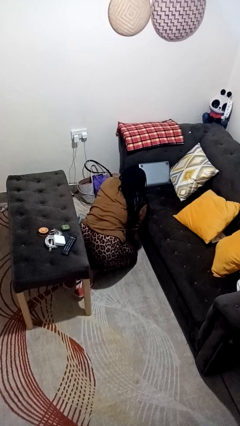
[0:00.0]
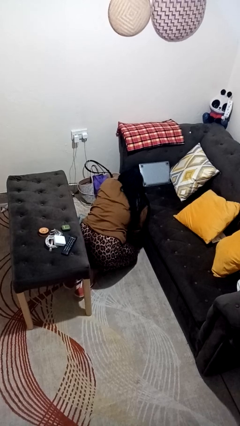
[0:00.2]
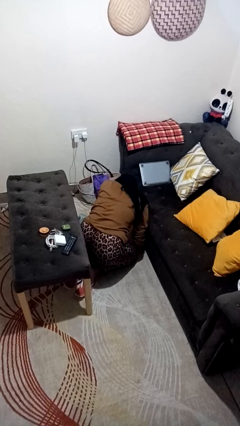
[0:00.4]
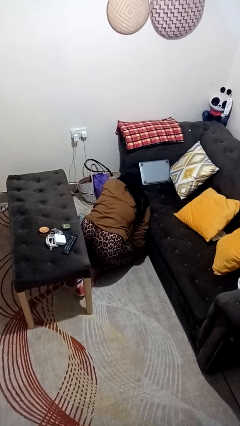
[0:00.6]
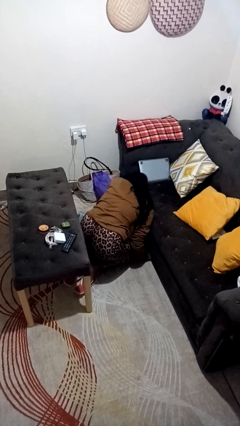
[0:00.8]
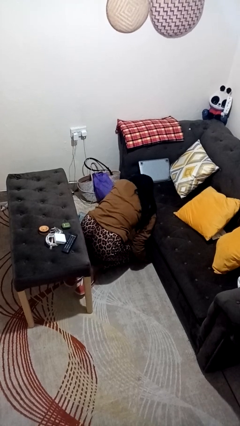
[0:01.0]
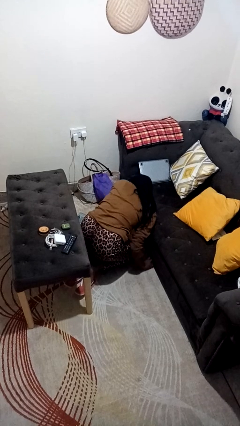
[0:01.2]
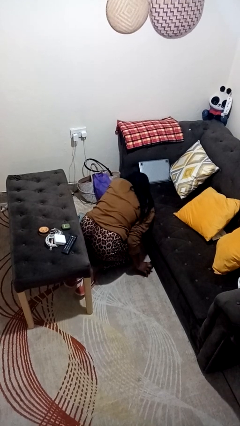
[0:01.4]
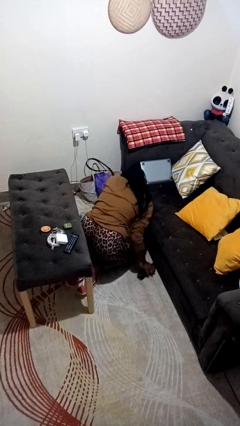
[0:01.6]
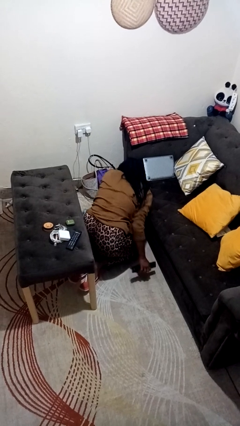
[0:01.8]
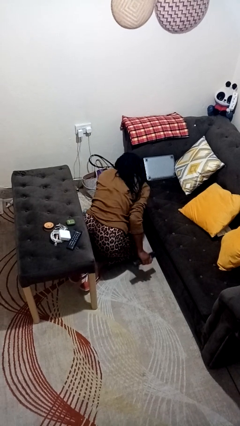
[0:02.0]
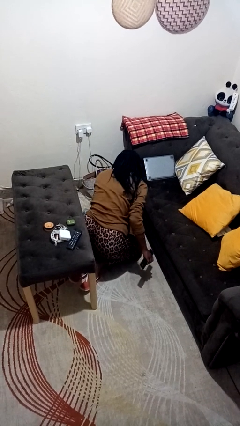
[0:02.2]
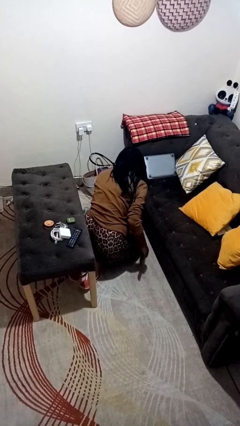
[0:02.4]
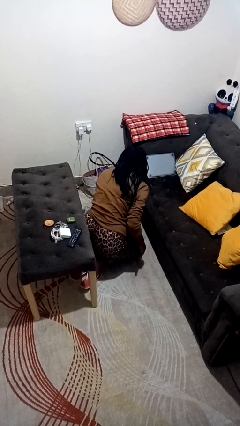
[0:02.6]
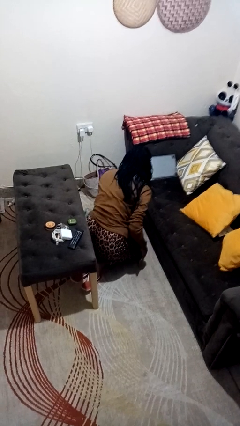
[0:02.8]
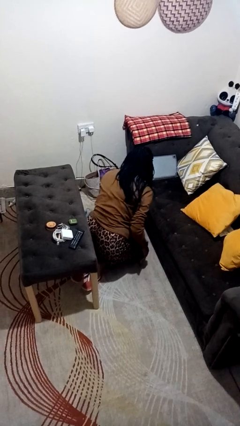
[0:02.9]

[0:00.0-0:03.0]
person searches under couch

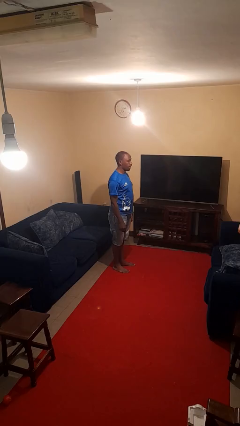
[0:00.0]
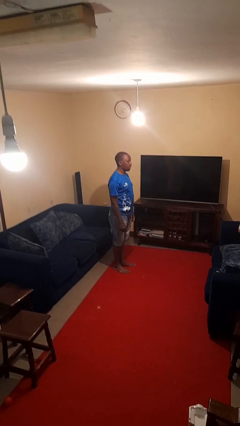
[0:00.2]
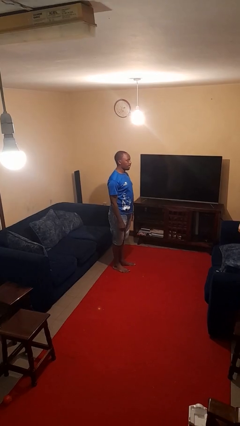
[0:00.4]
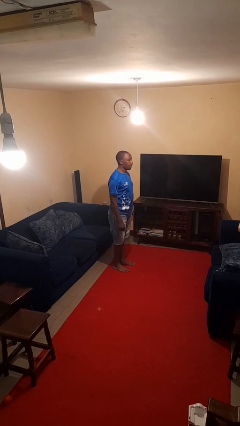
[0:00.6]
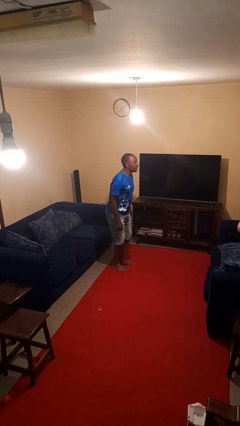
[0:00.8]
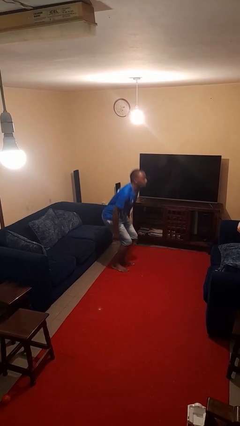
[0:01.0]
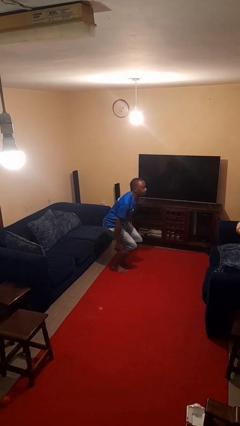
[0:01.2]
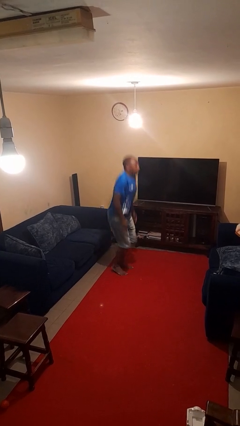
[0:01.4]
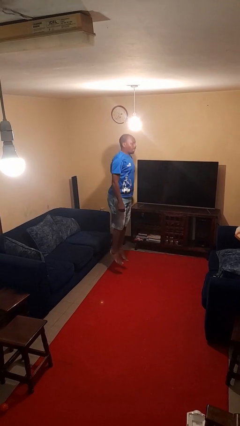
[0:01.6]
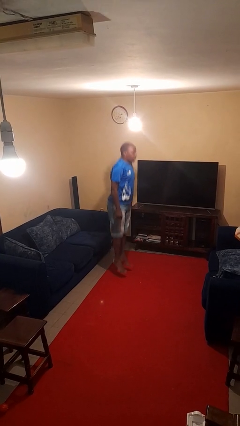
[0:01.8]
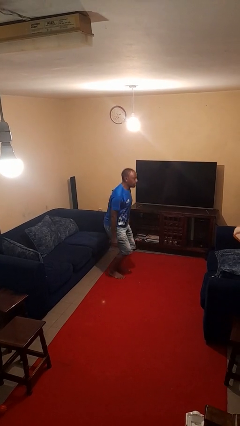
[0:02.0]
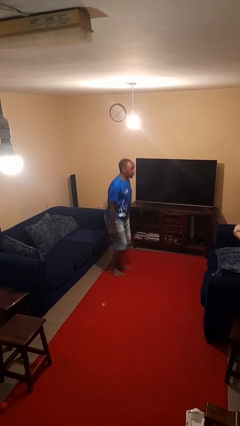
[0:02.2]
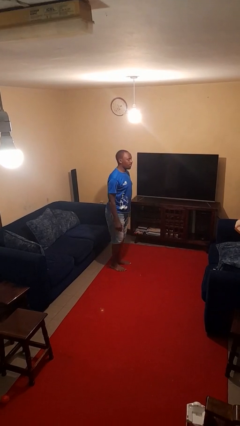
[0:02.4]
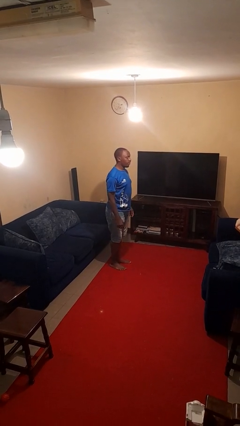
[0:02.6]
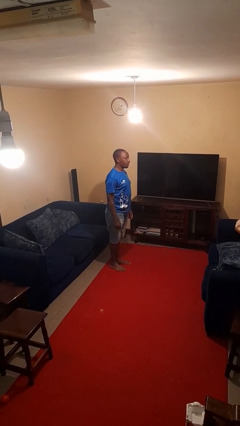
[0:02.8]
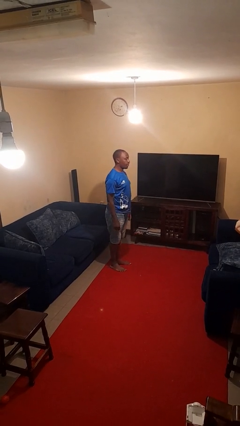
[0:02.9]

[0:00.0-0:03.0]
person jumps

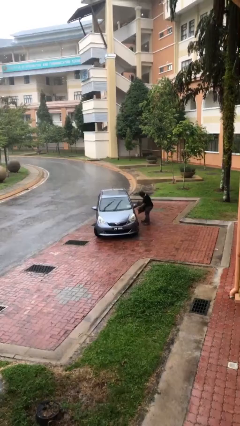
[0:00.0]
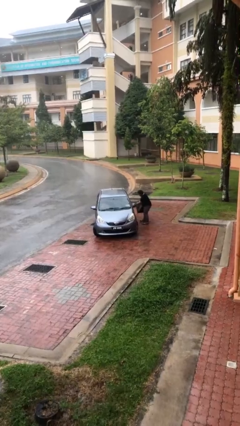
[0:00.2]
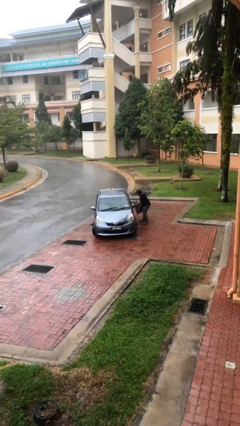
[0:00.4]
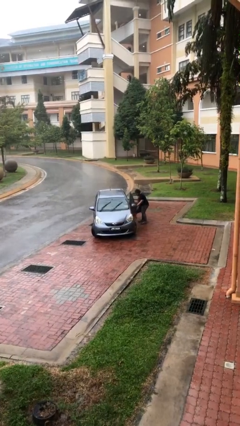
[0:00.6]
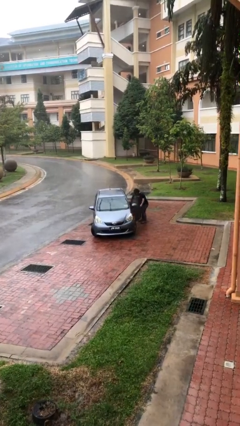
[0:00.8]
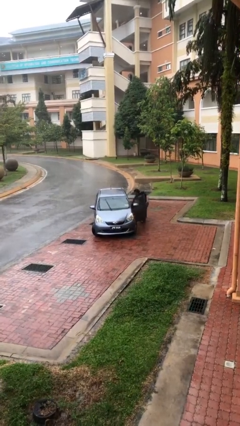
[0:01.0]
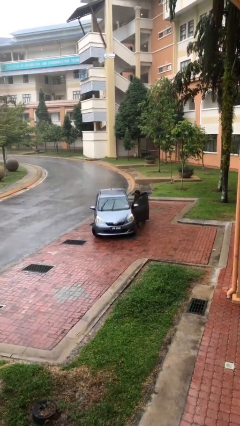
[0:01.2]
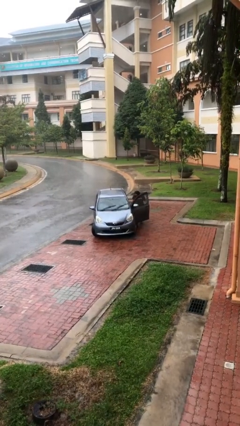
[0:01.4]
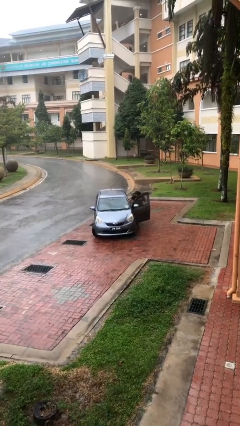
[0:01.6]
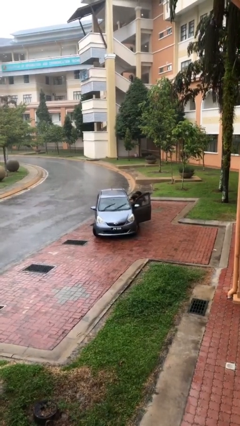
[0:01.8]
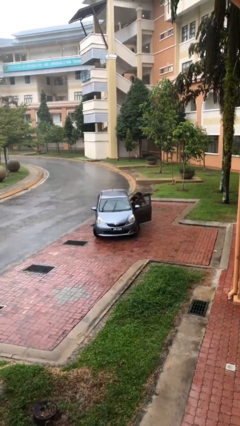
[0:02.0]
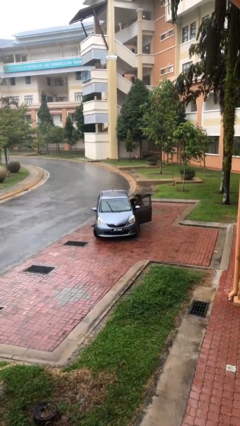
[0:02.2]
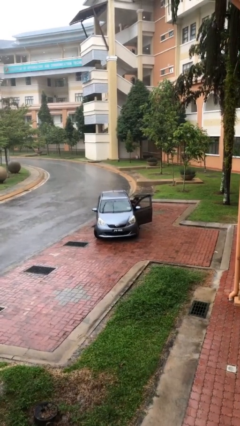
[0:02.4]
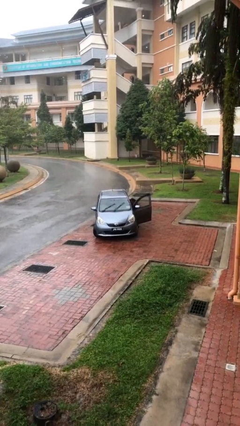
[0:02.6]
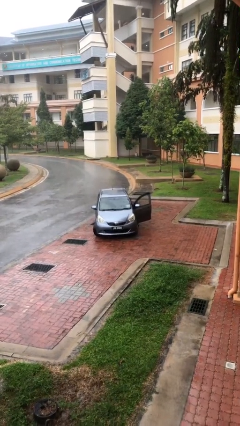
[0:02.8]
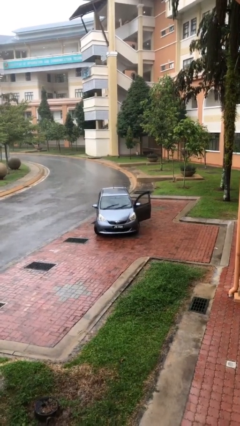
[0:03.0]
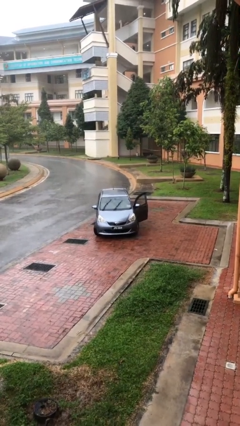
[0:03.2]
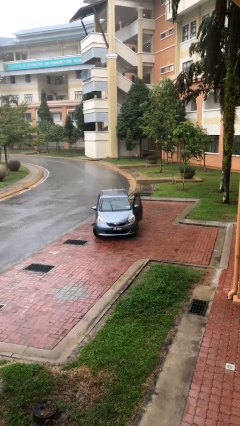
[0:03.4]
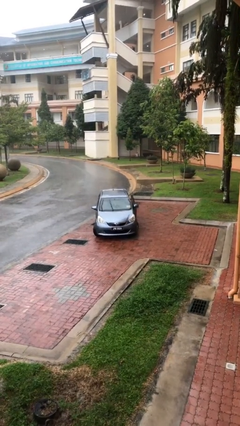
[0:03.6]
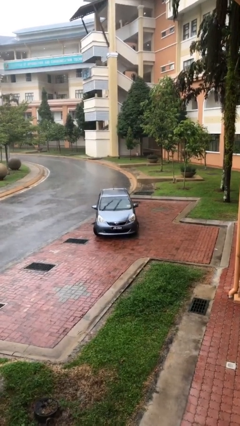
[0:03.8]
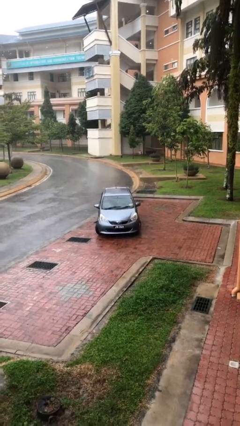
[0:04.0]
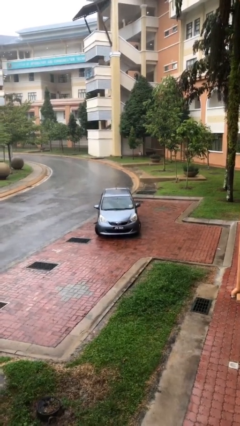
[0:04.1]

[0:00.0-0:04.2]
car picks up person

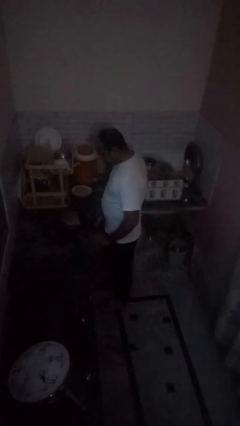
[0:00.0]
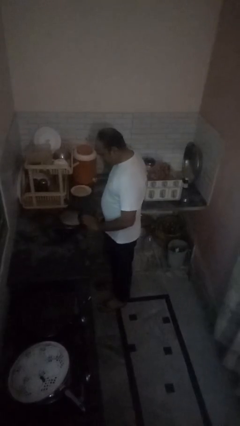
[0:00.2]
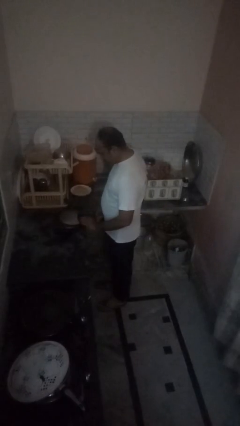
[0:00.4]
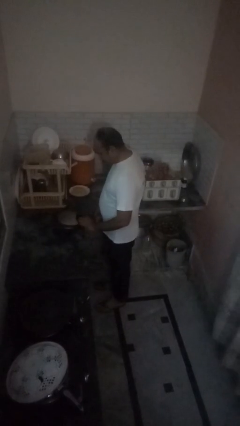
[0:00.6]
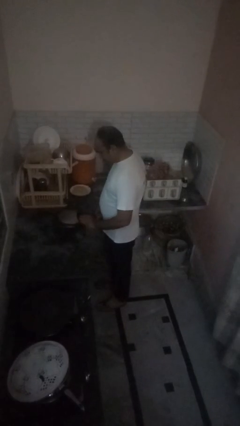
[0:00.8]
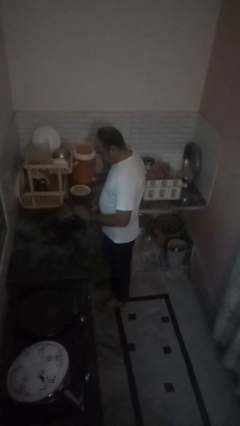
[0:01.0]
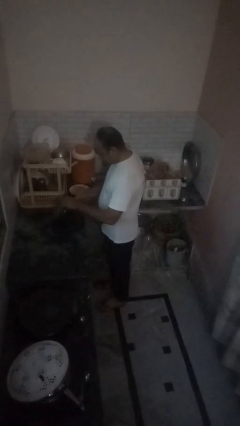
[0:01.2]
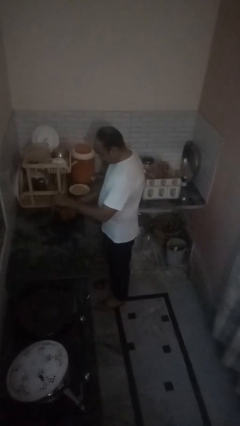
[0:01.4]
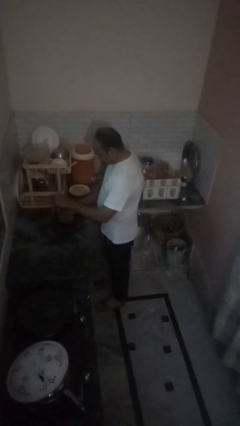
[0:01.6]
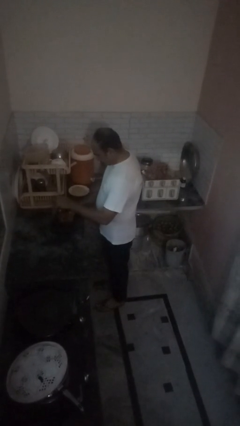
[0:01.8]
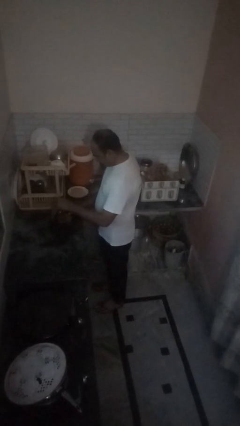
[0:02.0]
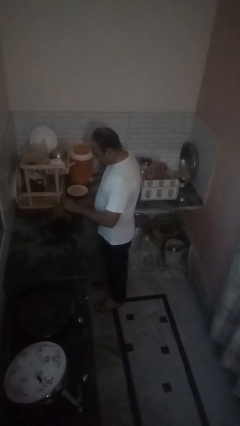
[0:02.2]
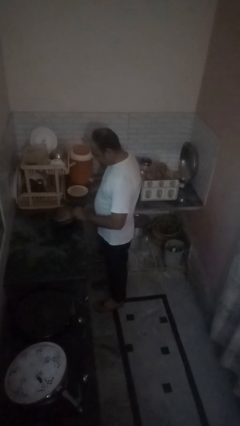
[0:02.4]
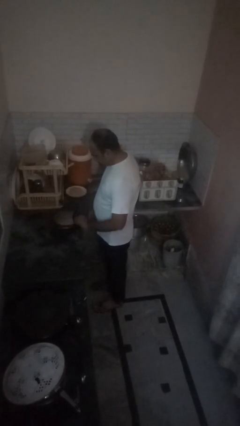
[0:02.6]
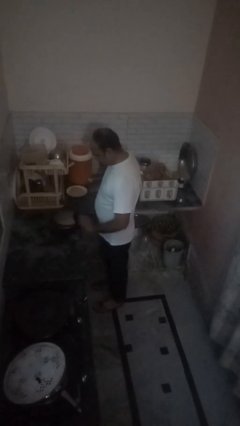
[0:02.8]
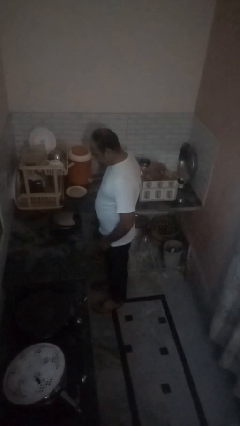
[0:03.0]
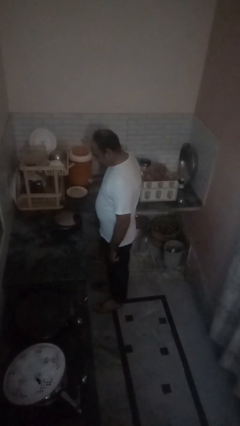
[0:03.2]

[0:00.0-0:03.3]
person puts object into toaster

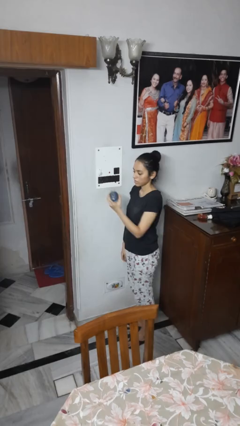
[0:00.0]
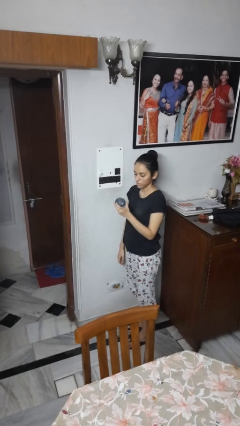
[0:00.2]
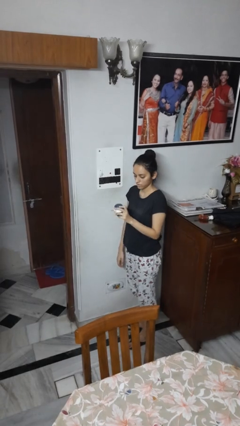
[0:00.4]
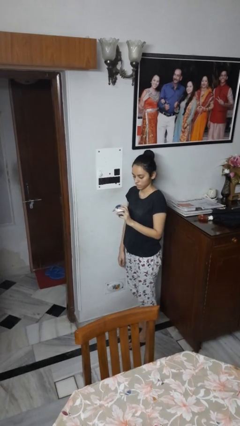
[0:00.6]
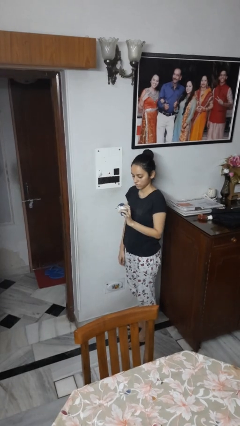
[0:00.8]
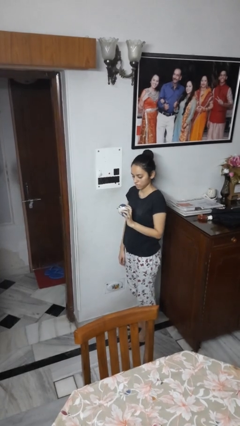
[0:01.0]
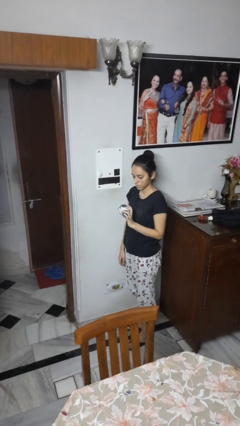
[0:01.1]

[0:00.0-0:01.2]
person unplugs from electrical socket

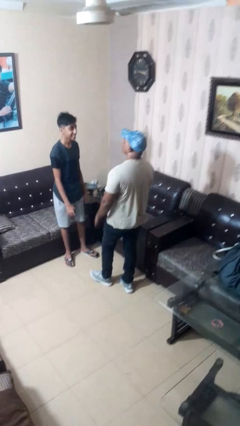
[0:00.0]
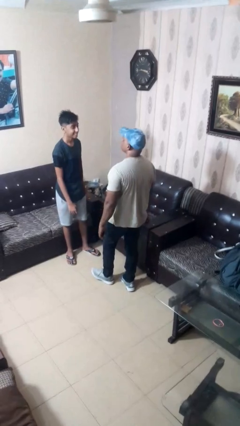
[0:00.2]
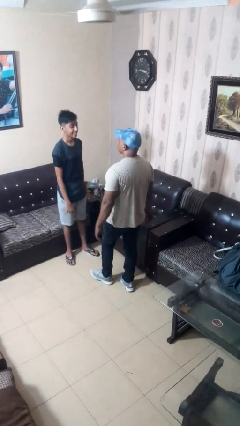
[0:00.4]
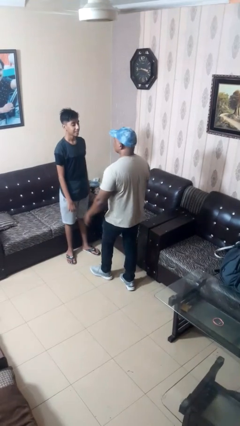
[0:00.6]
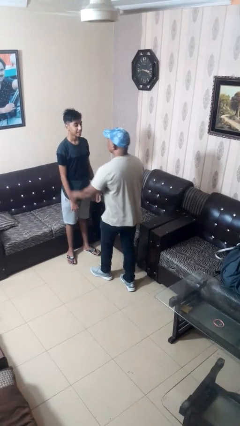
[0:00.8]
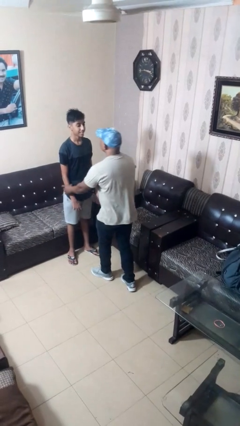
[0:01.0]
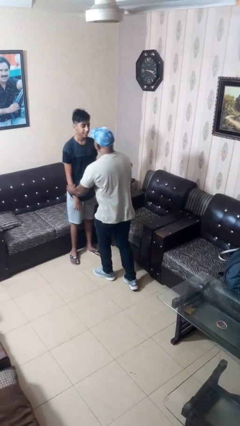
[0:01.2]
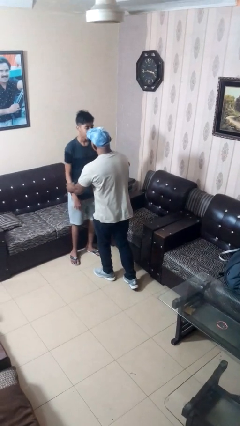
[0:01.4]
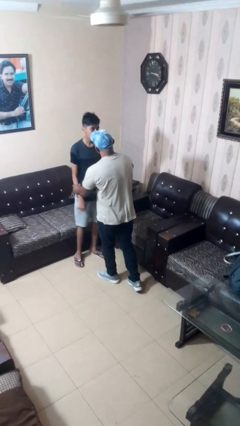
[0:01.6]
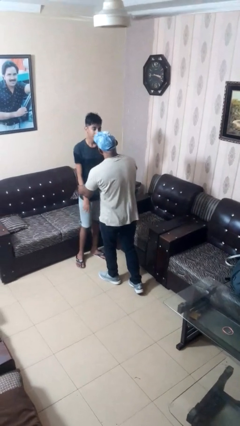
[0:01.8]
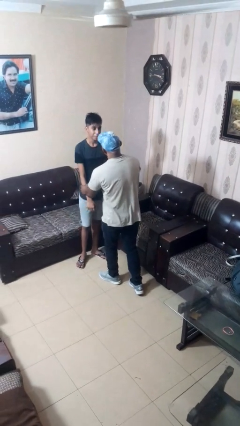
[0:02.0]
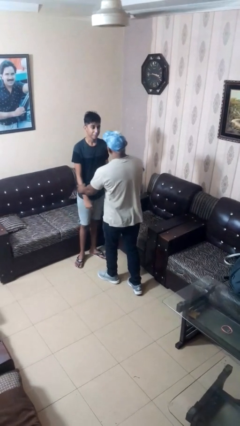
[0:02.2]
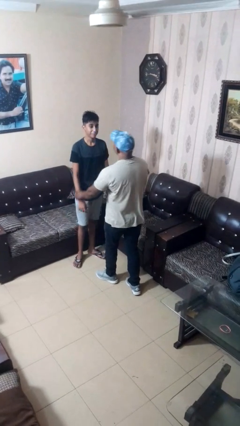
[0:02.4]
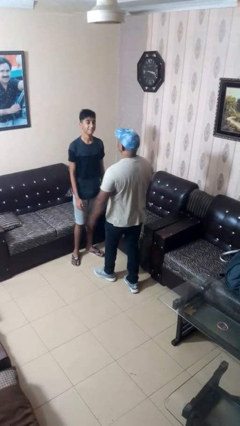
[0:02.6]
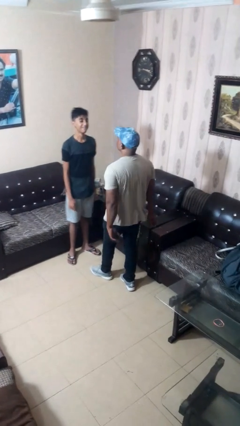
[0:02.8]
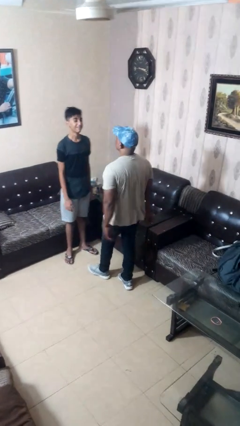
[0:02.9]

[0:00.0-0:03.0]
person grabs person by forearm
